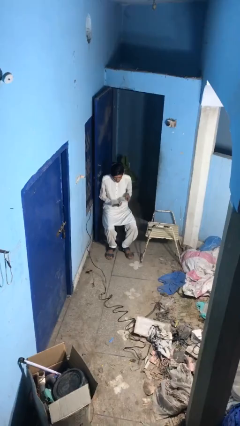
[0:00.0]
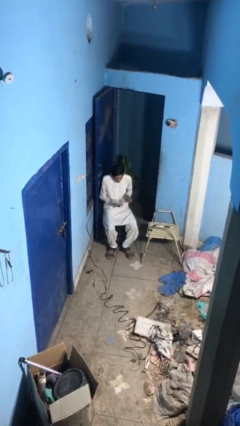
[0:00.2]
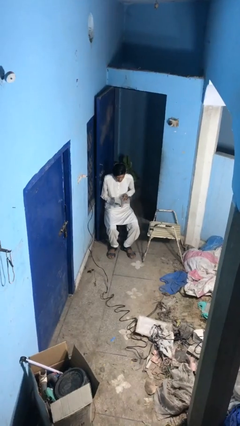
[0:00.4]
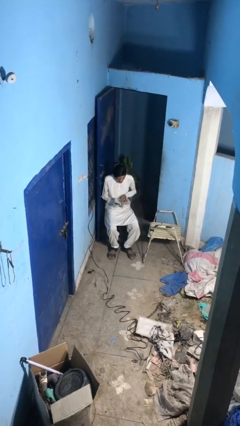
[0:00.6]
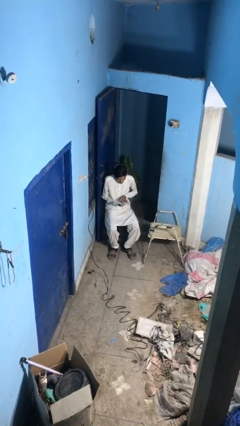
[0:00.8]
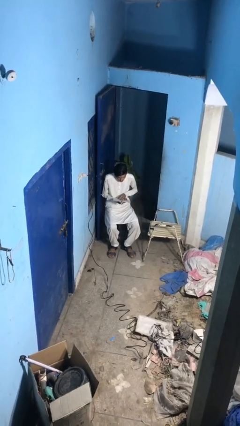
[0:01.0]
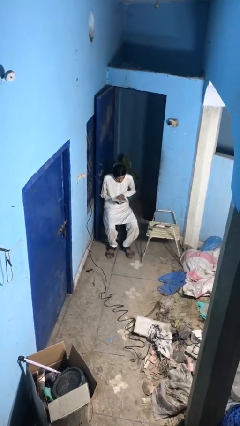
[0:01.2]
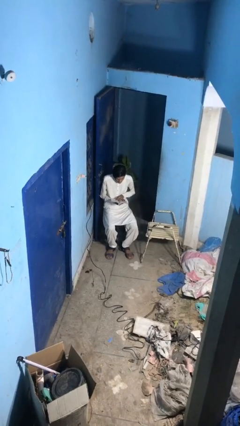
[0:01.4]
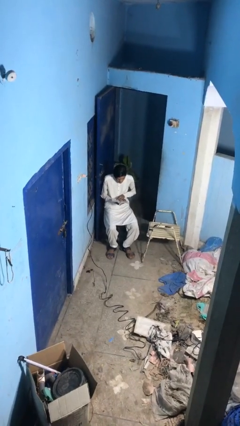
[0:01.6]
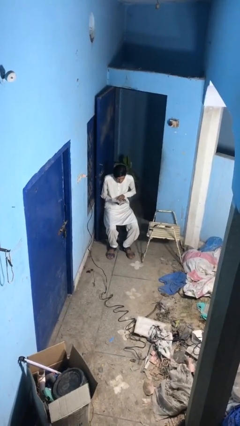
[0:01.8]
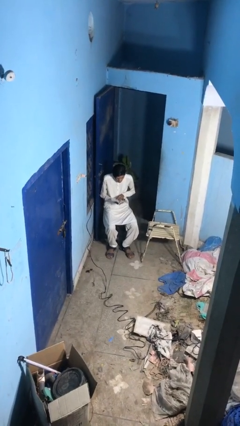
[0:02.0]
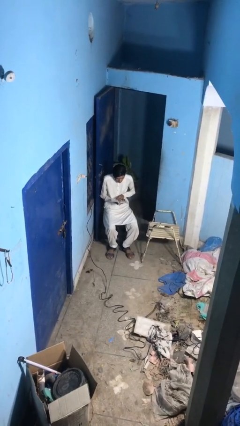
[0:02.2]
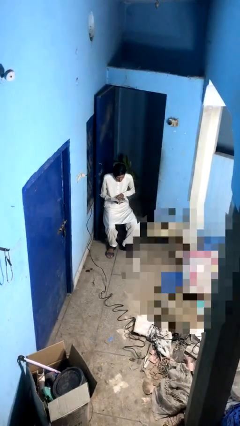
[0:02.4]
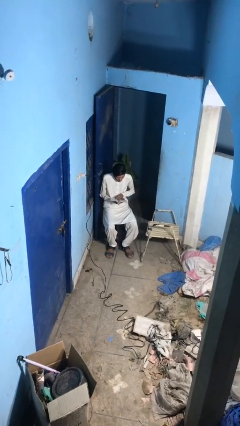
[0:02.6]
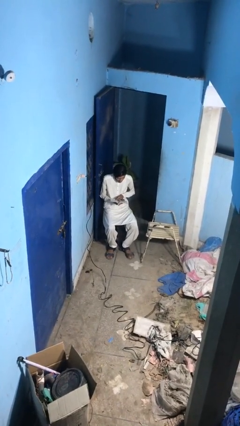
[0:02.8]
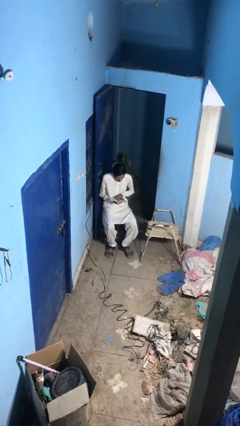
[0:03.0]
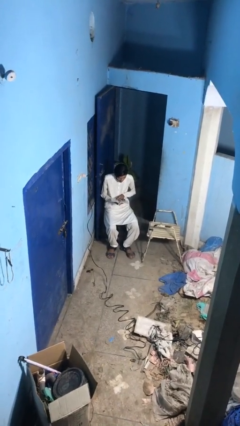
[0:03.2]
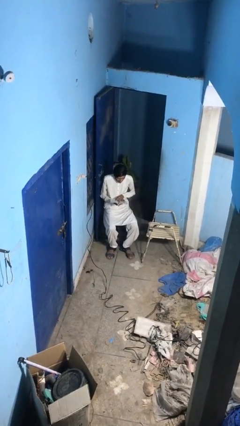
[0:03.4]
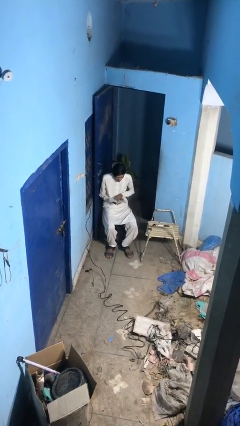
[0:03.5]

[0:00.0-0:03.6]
person reads document

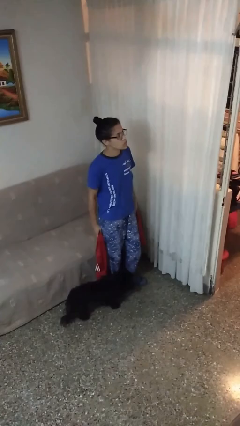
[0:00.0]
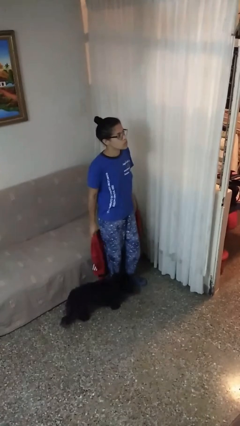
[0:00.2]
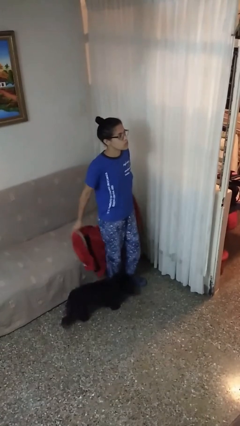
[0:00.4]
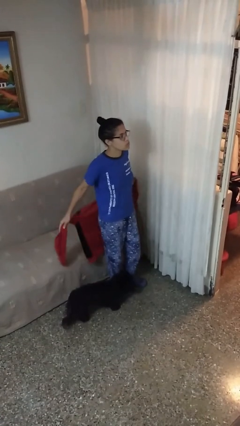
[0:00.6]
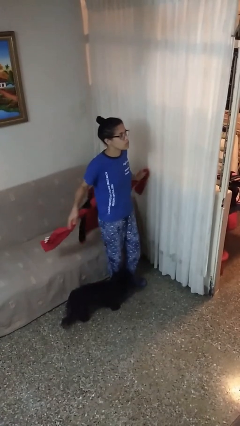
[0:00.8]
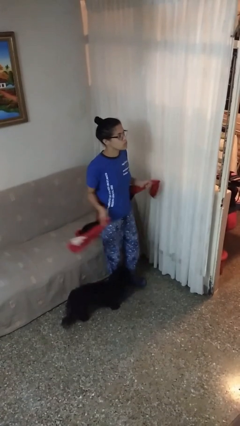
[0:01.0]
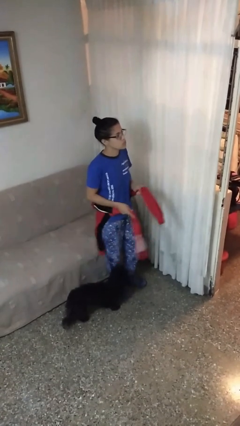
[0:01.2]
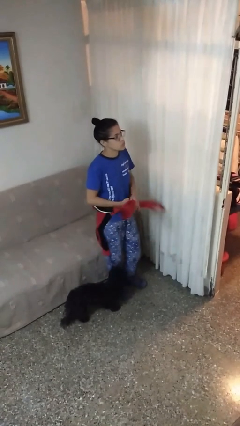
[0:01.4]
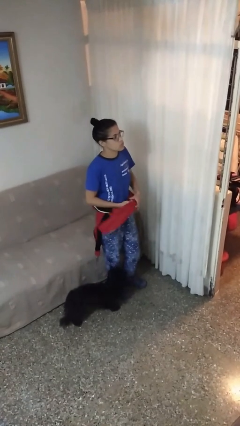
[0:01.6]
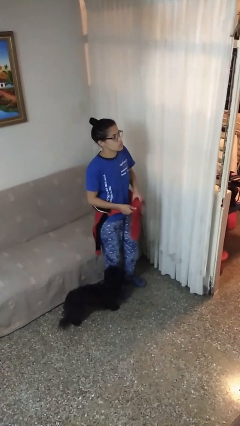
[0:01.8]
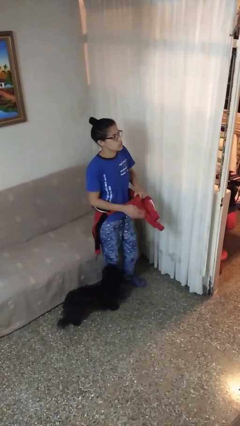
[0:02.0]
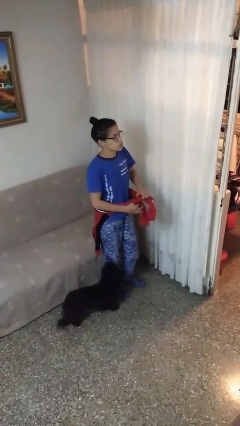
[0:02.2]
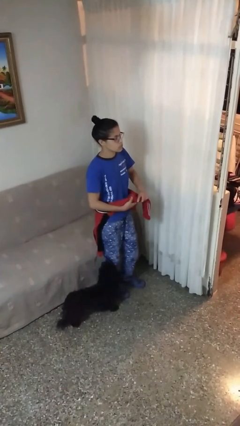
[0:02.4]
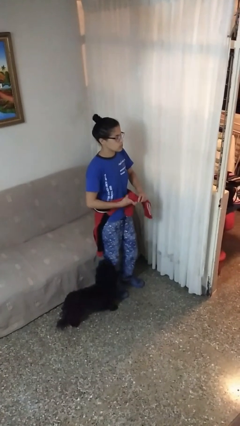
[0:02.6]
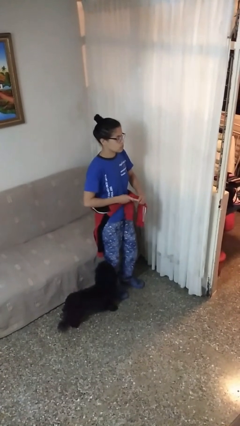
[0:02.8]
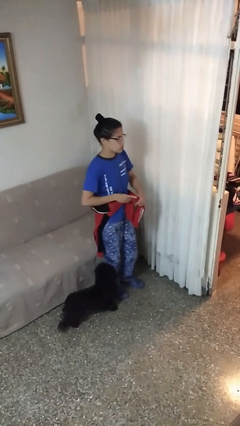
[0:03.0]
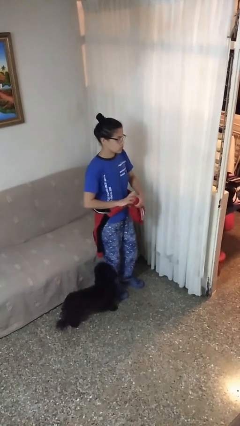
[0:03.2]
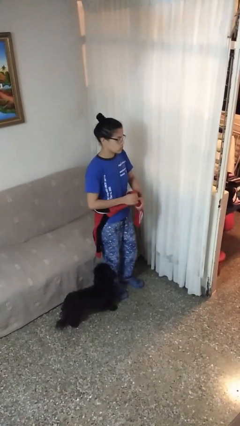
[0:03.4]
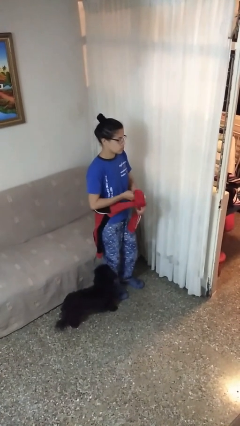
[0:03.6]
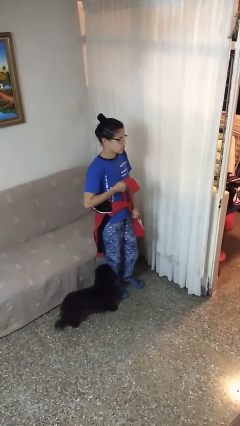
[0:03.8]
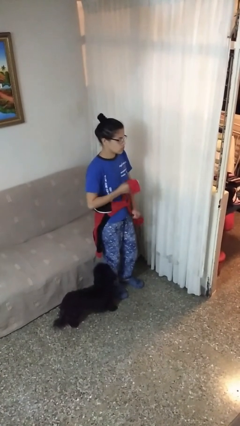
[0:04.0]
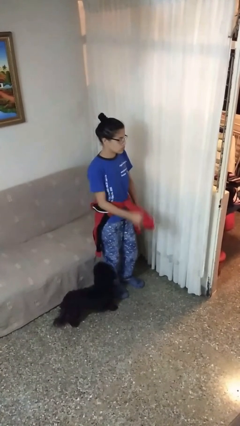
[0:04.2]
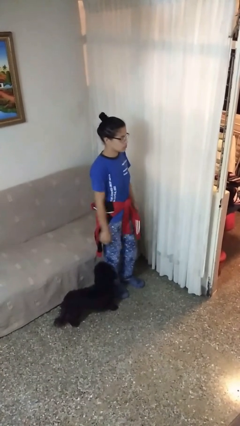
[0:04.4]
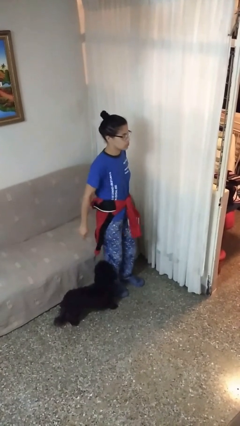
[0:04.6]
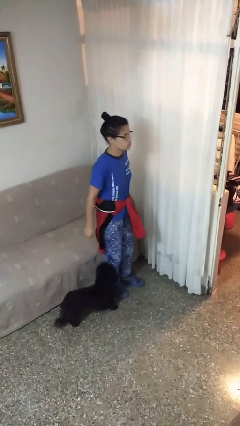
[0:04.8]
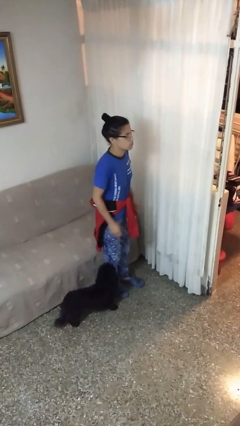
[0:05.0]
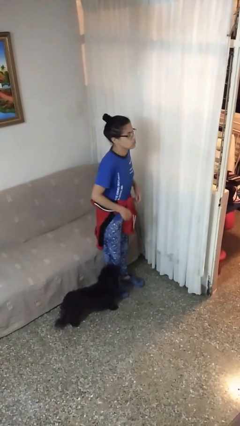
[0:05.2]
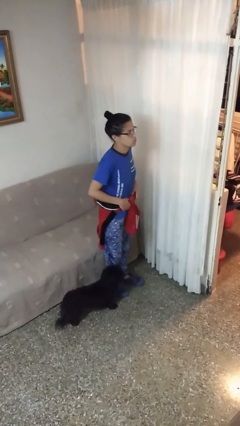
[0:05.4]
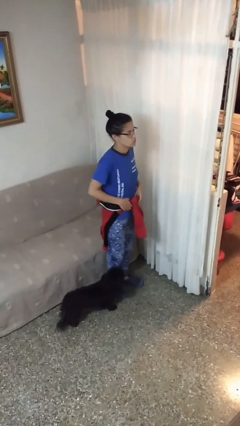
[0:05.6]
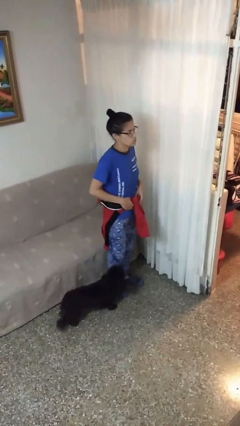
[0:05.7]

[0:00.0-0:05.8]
person ties jacket around waist

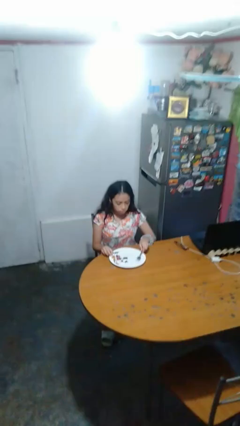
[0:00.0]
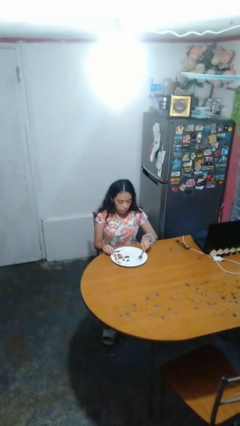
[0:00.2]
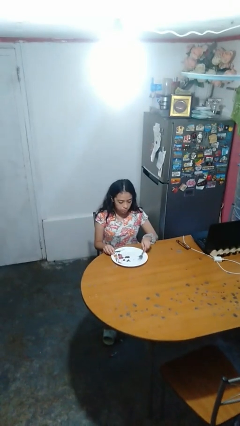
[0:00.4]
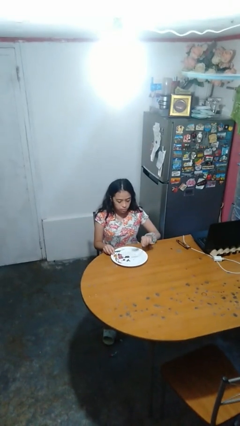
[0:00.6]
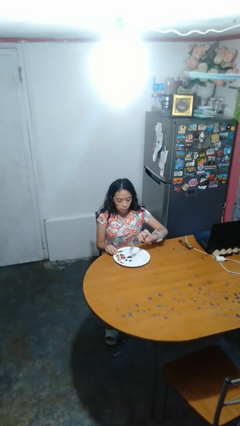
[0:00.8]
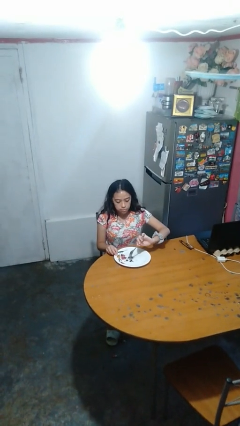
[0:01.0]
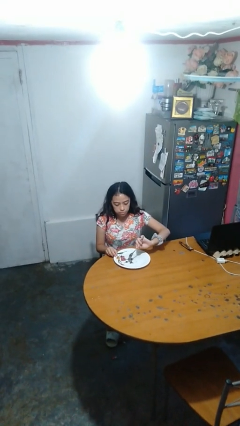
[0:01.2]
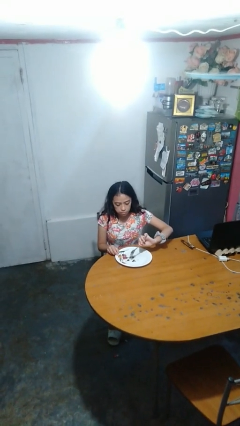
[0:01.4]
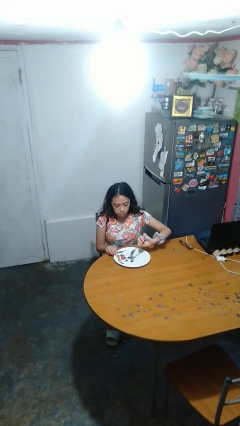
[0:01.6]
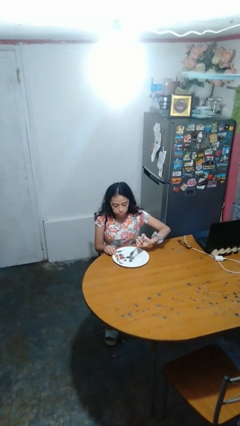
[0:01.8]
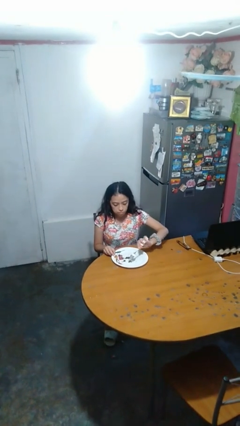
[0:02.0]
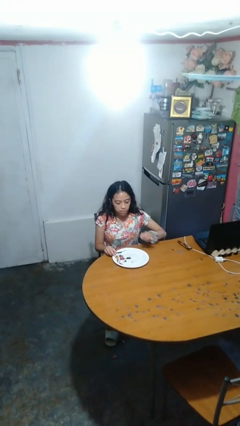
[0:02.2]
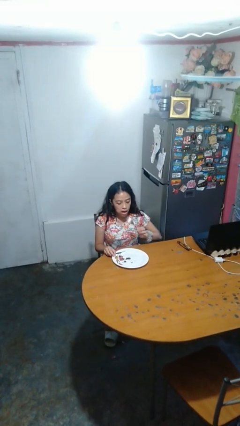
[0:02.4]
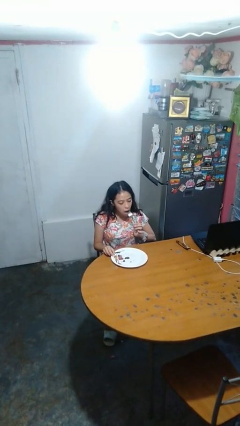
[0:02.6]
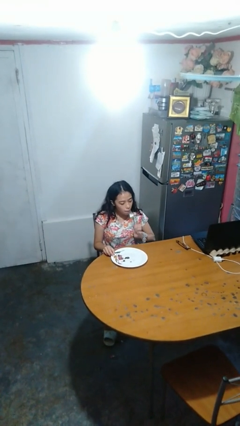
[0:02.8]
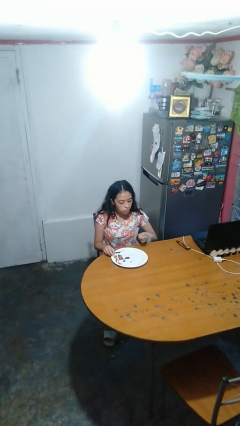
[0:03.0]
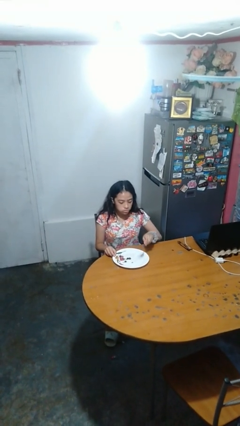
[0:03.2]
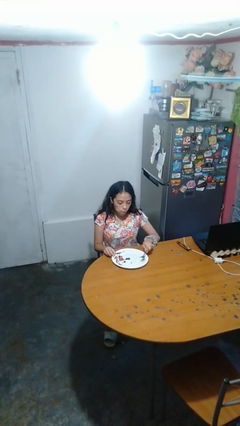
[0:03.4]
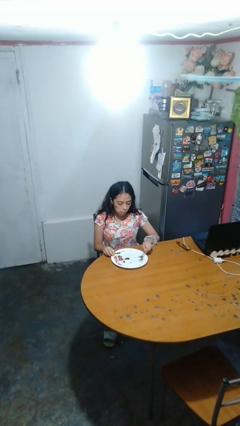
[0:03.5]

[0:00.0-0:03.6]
person eats with utensil

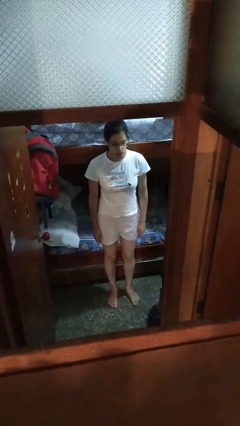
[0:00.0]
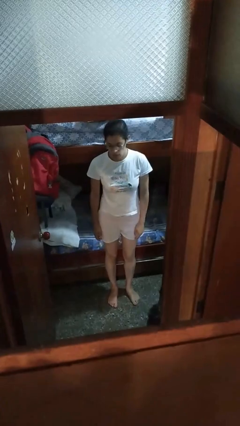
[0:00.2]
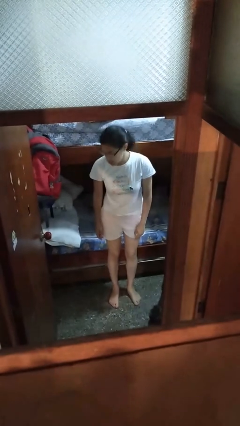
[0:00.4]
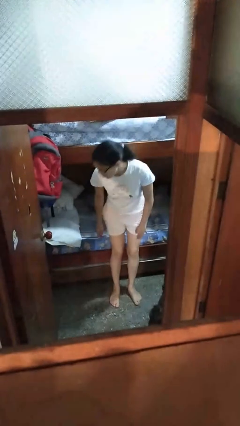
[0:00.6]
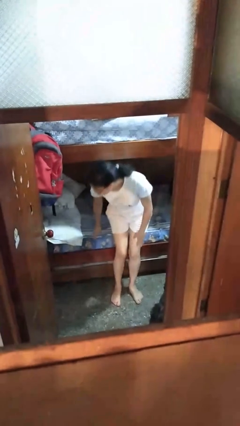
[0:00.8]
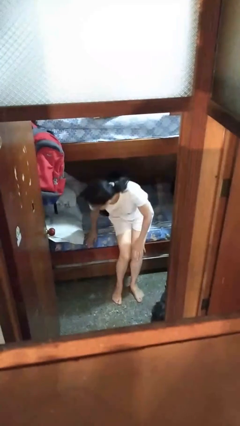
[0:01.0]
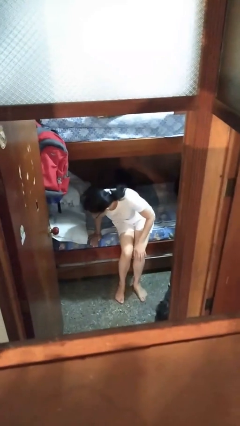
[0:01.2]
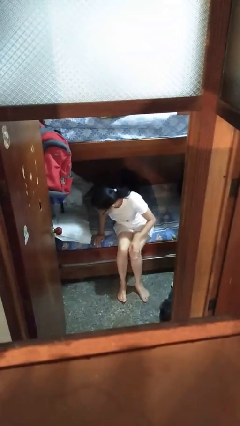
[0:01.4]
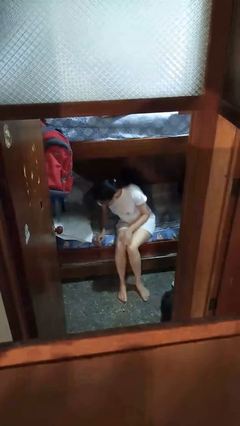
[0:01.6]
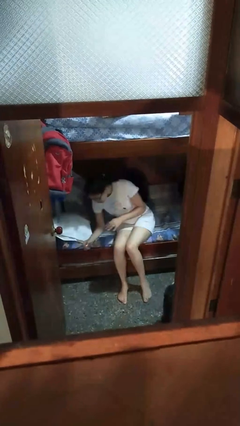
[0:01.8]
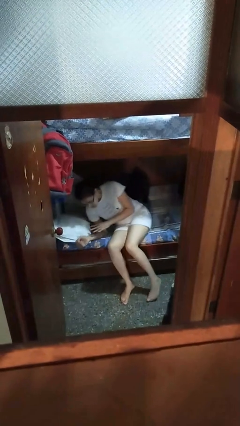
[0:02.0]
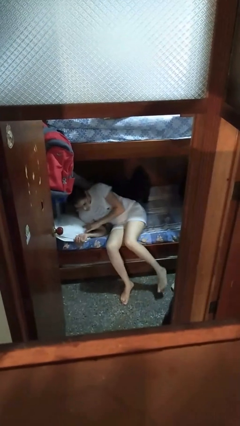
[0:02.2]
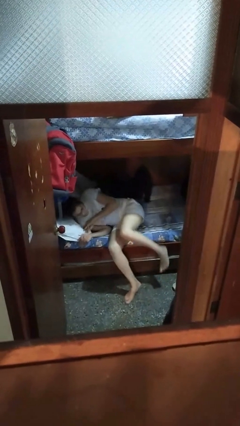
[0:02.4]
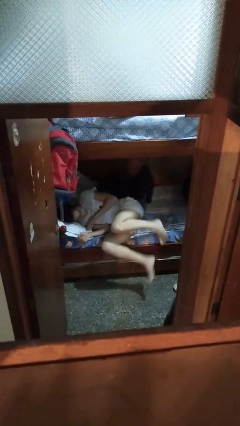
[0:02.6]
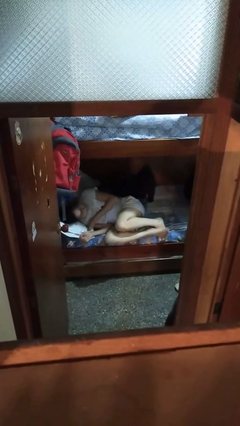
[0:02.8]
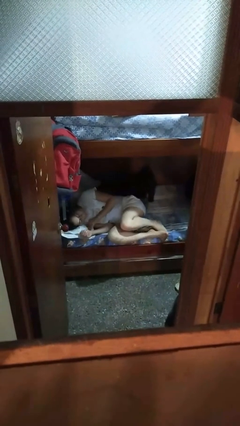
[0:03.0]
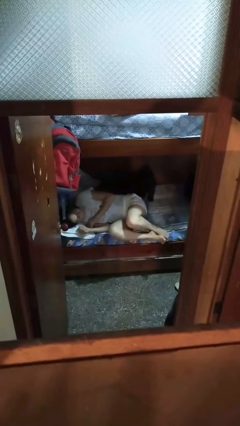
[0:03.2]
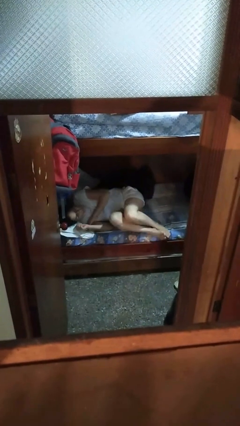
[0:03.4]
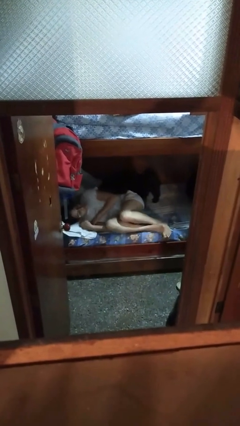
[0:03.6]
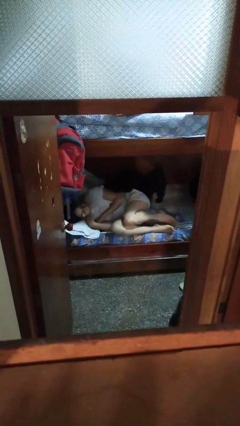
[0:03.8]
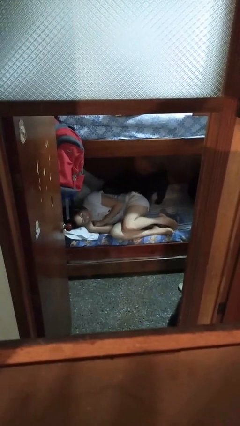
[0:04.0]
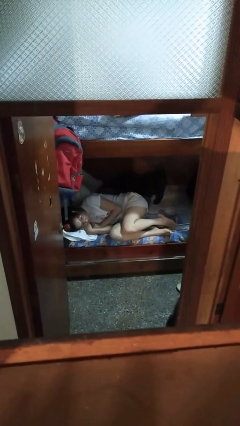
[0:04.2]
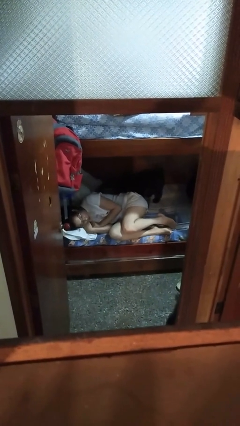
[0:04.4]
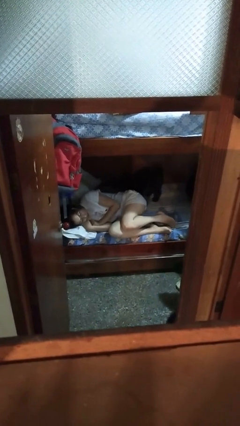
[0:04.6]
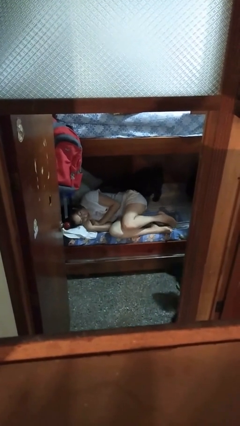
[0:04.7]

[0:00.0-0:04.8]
person lies down on bed
